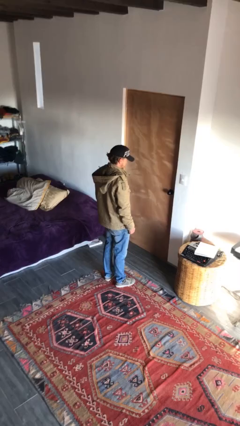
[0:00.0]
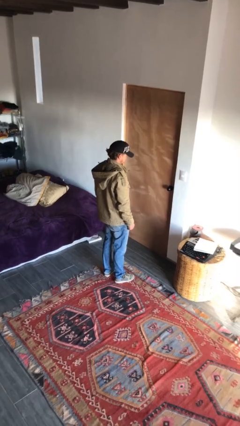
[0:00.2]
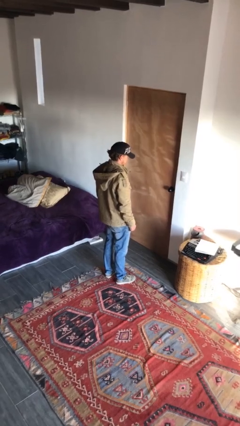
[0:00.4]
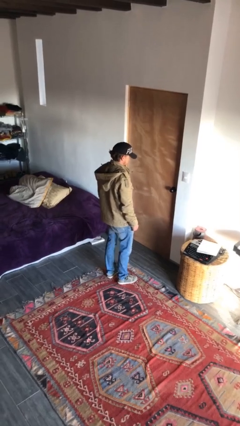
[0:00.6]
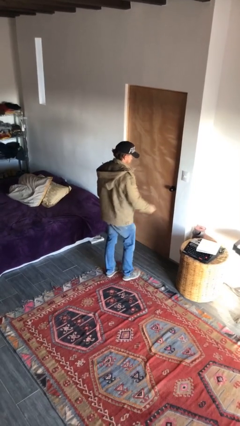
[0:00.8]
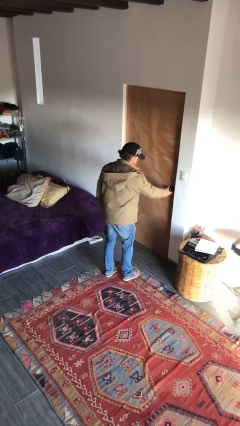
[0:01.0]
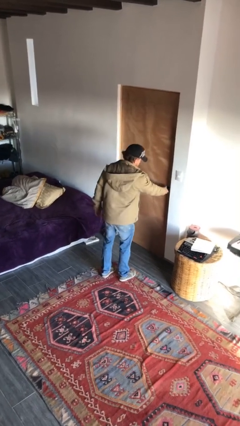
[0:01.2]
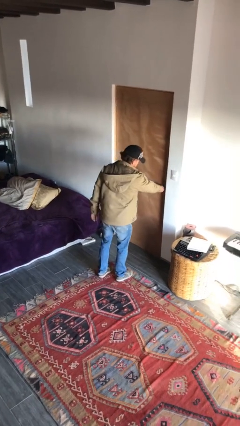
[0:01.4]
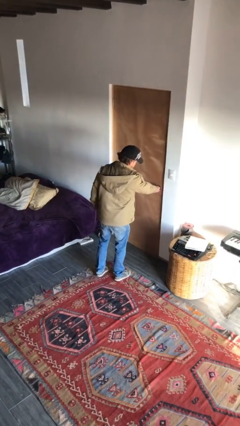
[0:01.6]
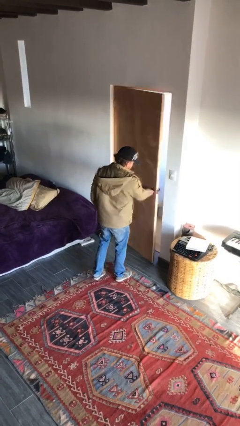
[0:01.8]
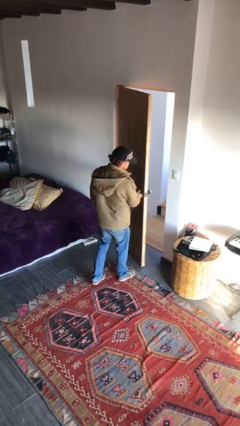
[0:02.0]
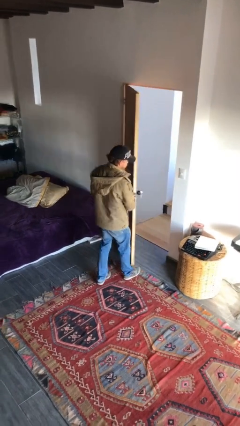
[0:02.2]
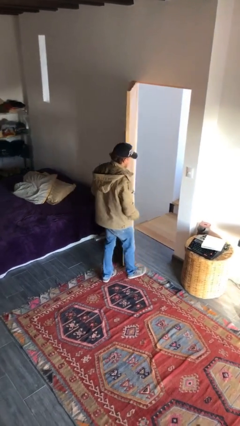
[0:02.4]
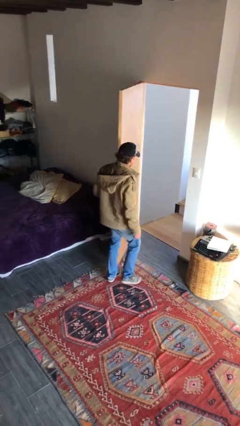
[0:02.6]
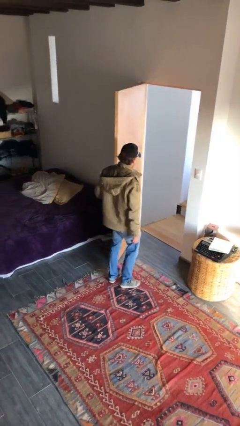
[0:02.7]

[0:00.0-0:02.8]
person opens facility door

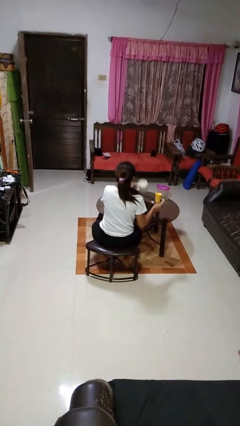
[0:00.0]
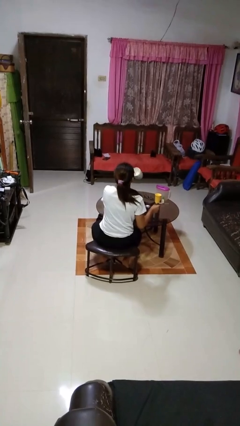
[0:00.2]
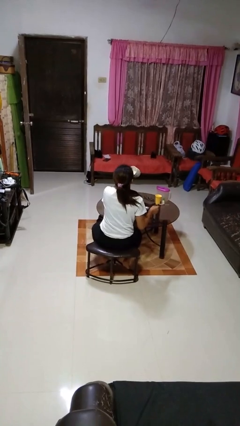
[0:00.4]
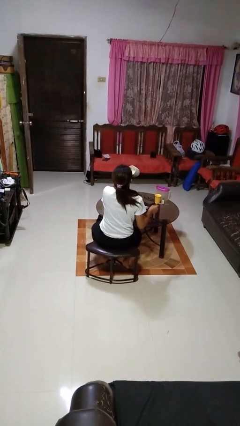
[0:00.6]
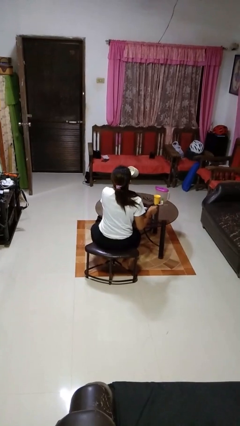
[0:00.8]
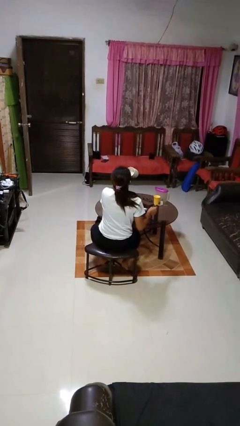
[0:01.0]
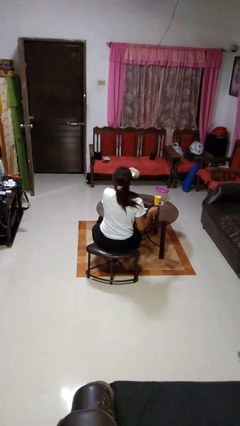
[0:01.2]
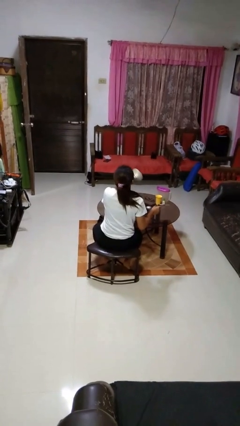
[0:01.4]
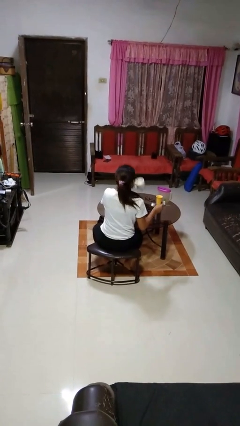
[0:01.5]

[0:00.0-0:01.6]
person drinks from mug

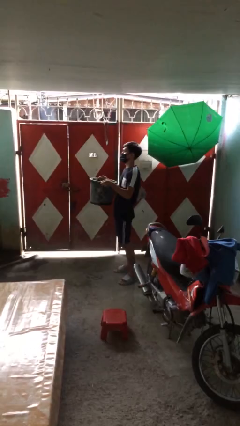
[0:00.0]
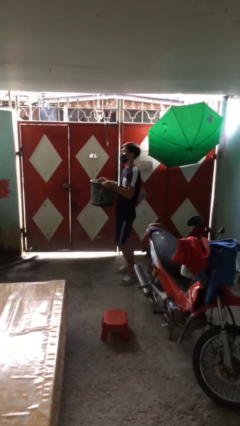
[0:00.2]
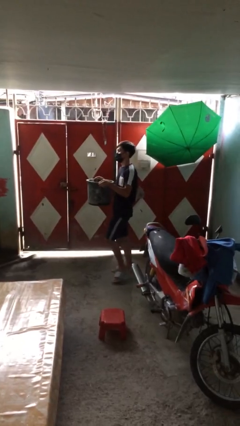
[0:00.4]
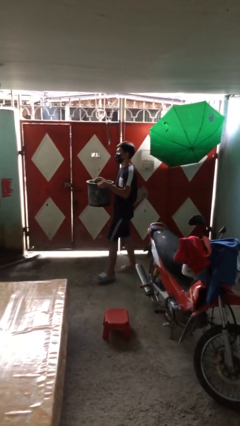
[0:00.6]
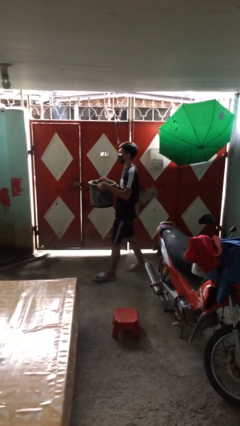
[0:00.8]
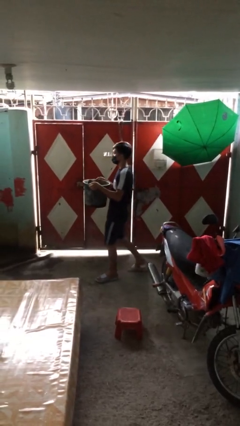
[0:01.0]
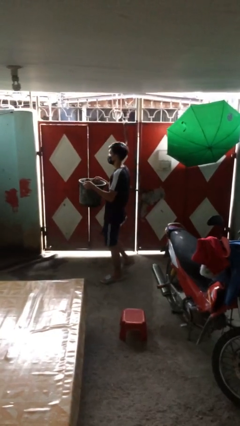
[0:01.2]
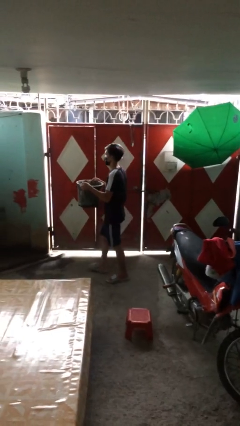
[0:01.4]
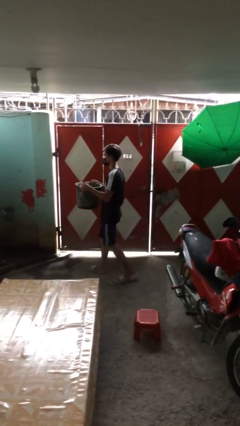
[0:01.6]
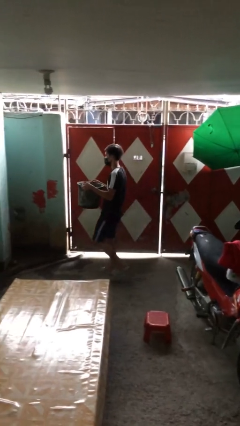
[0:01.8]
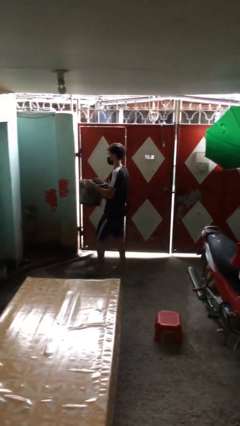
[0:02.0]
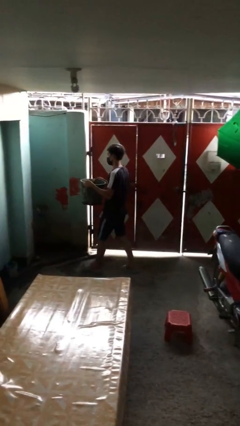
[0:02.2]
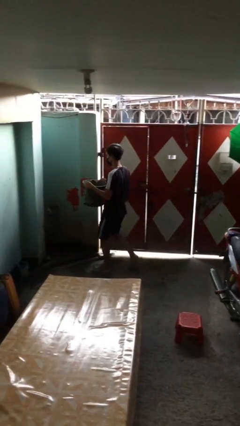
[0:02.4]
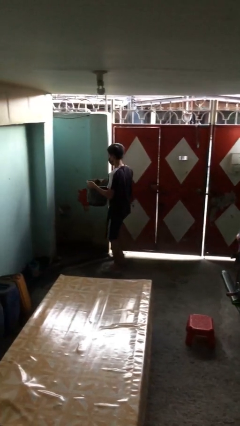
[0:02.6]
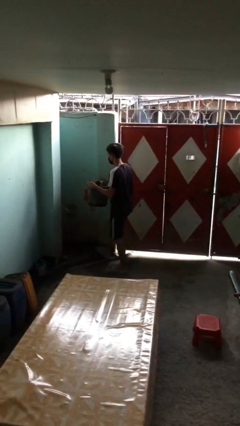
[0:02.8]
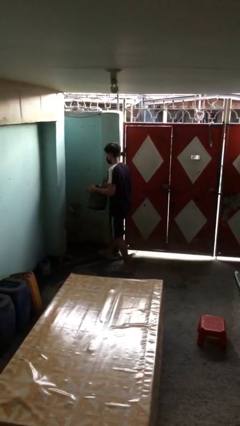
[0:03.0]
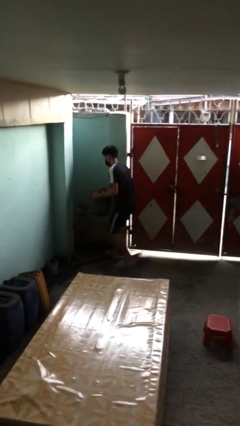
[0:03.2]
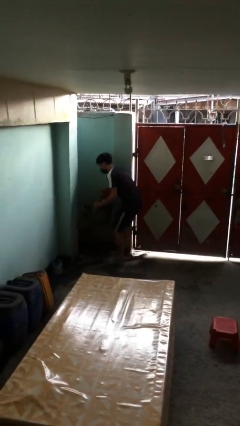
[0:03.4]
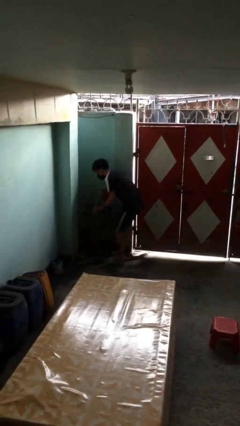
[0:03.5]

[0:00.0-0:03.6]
person carries heavy object

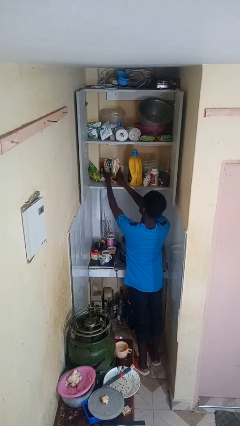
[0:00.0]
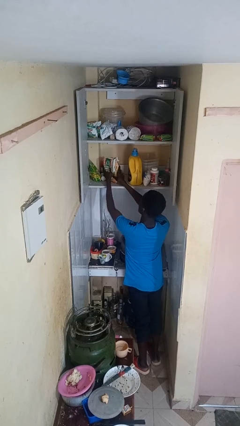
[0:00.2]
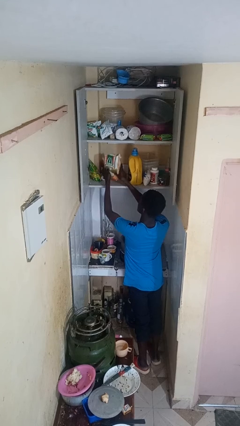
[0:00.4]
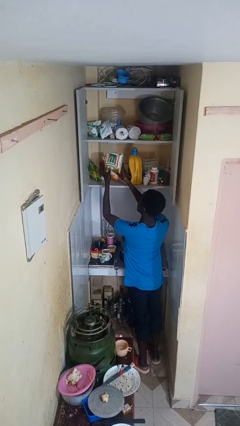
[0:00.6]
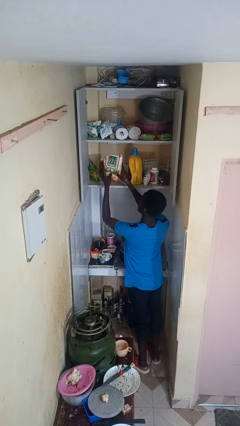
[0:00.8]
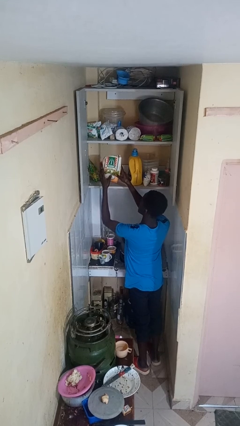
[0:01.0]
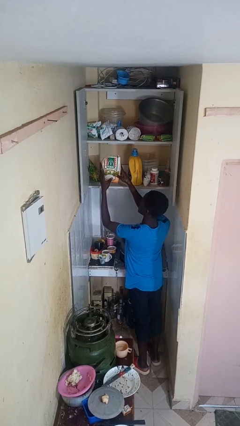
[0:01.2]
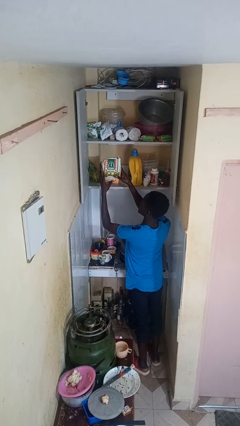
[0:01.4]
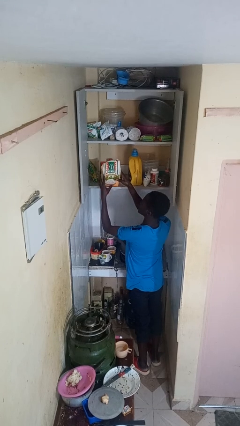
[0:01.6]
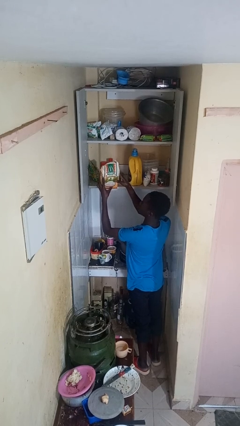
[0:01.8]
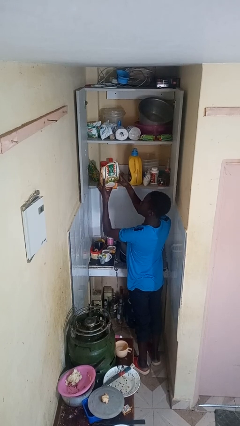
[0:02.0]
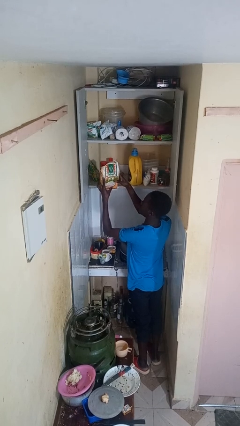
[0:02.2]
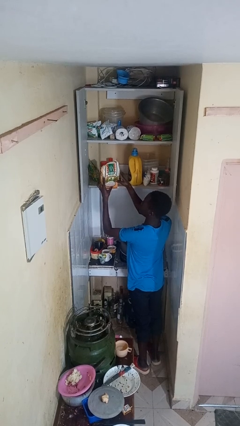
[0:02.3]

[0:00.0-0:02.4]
person takes object from cabinet

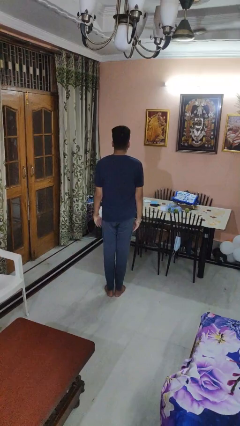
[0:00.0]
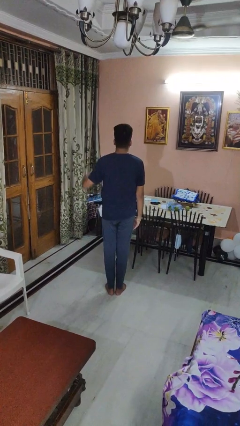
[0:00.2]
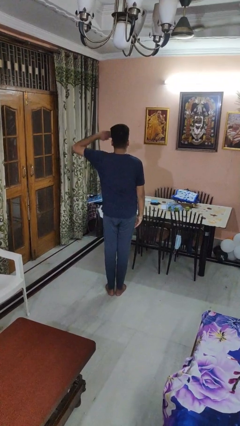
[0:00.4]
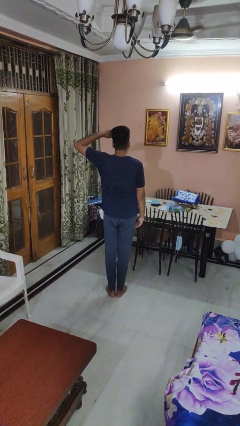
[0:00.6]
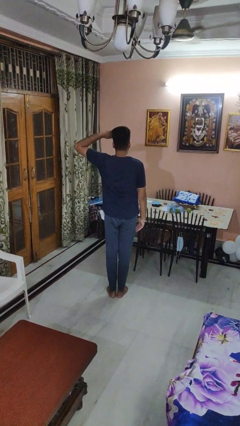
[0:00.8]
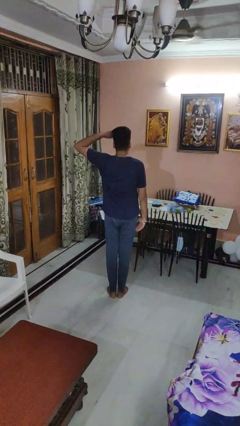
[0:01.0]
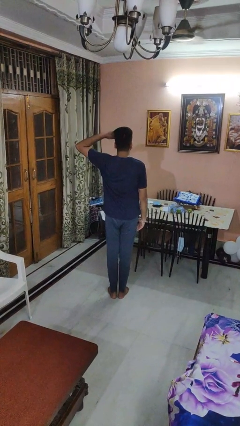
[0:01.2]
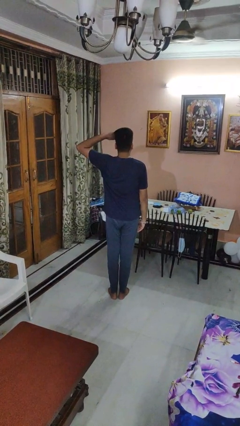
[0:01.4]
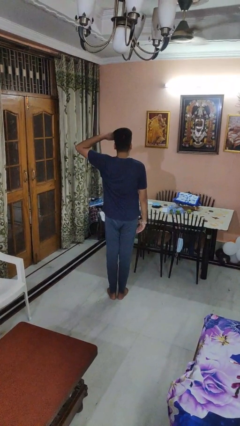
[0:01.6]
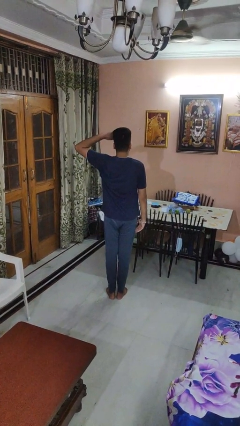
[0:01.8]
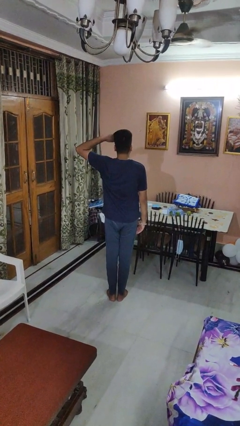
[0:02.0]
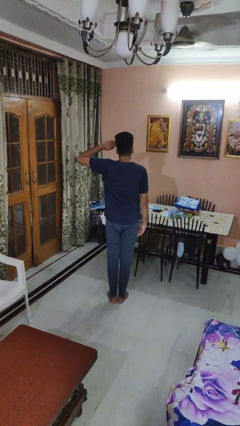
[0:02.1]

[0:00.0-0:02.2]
person salutes

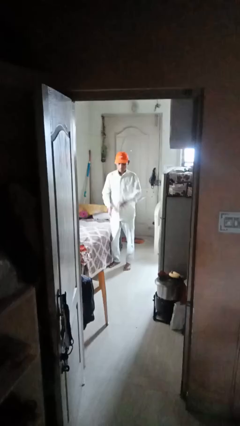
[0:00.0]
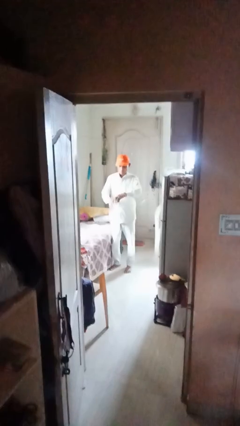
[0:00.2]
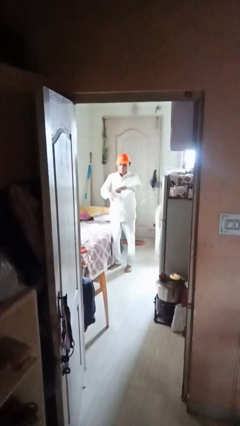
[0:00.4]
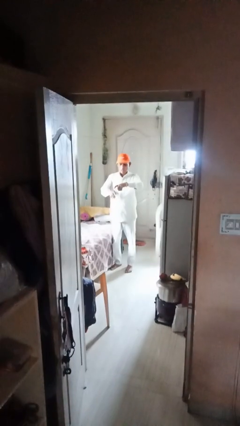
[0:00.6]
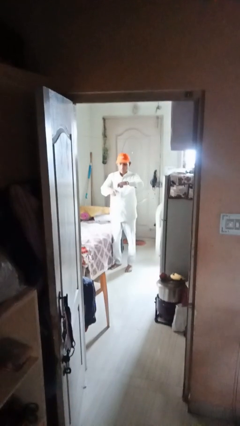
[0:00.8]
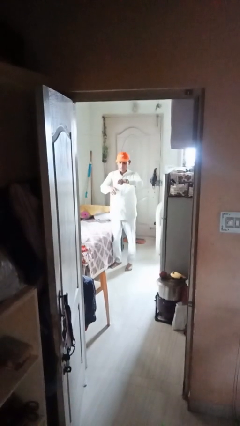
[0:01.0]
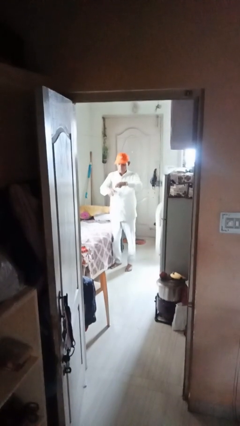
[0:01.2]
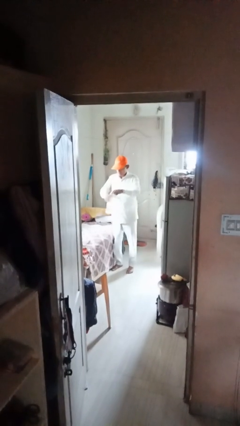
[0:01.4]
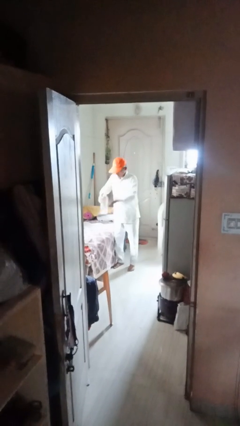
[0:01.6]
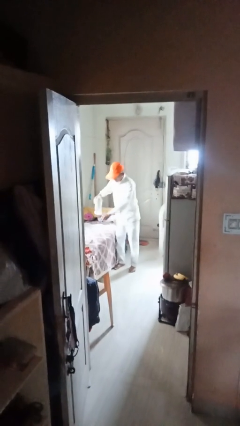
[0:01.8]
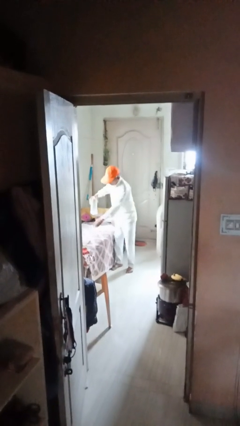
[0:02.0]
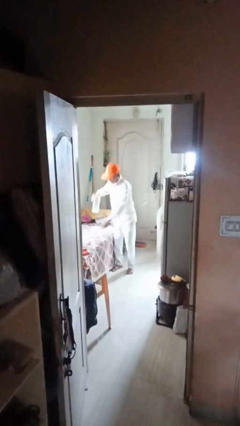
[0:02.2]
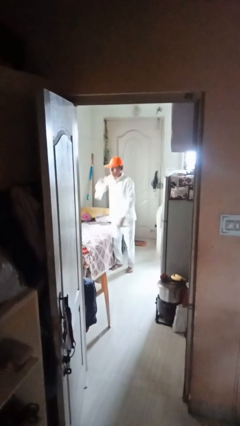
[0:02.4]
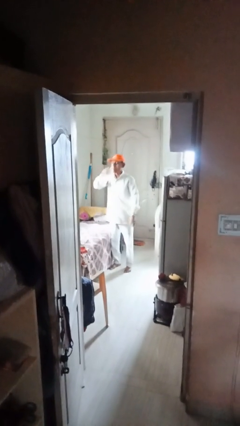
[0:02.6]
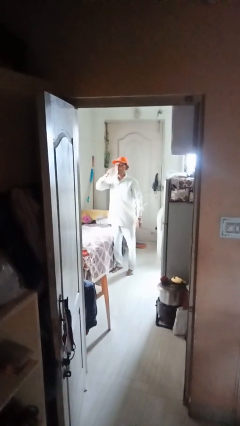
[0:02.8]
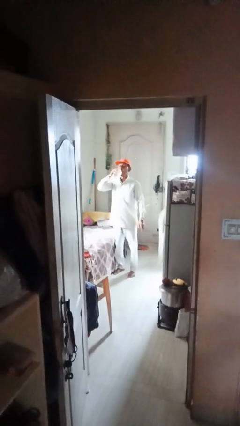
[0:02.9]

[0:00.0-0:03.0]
person drinks from bottle

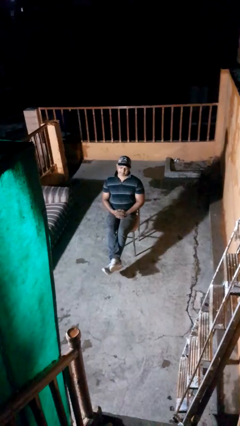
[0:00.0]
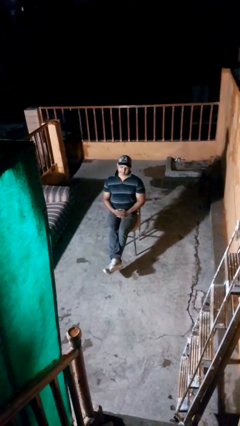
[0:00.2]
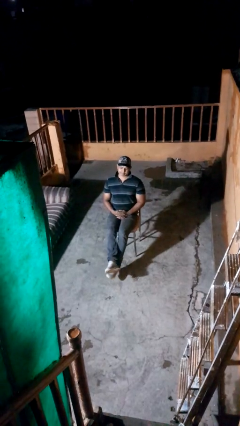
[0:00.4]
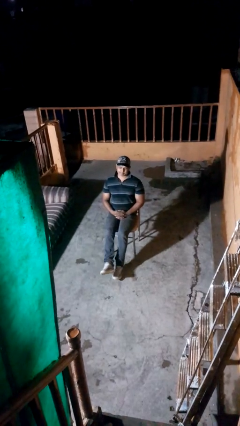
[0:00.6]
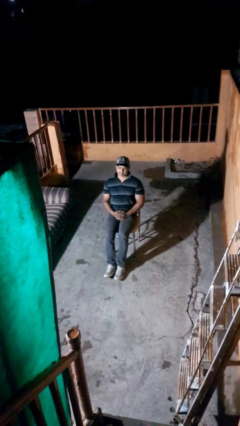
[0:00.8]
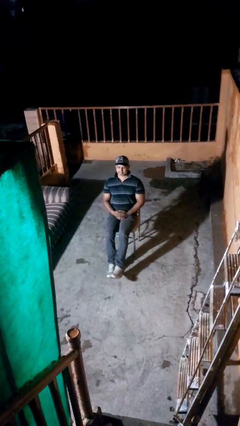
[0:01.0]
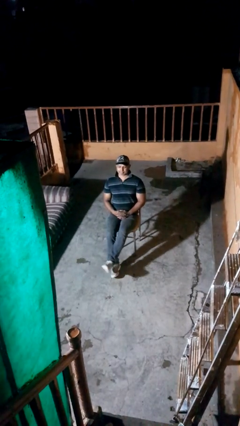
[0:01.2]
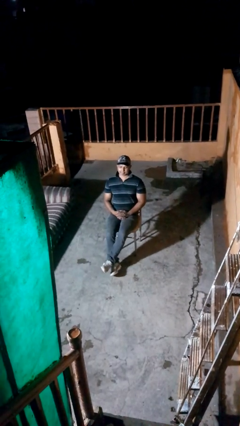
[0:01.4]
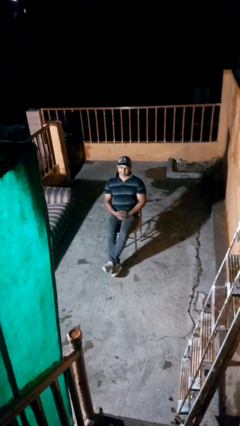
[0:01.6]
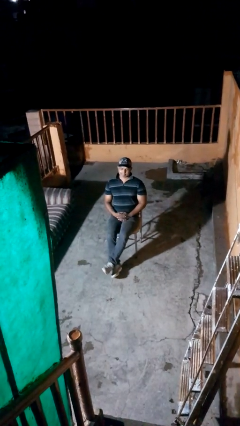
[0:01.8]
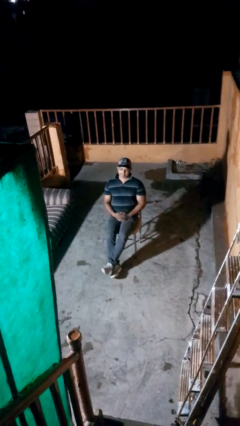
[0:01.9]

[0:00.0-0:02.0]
person crosses legs
